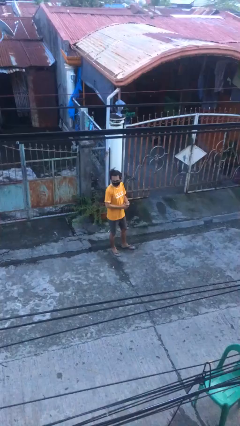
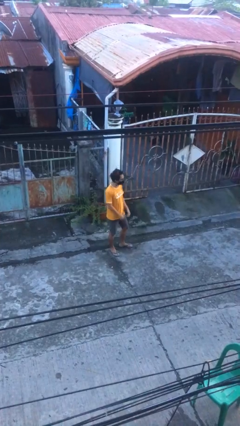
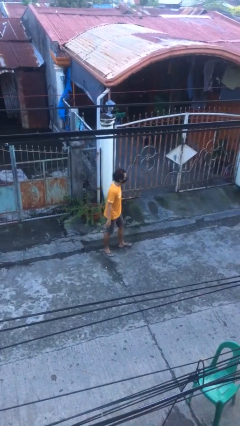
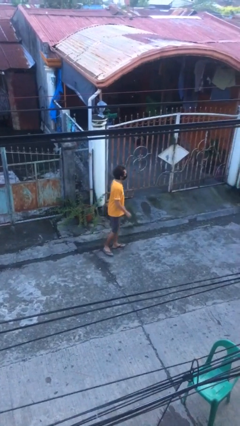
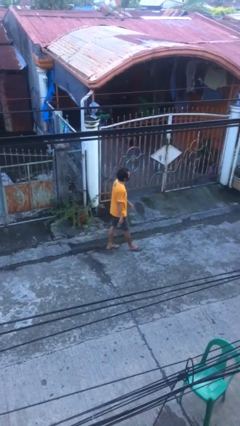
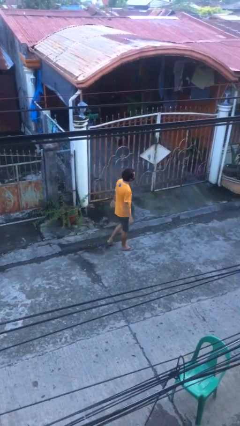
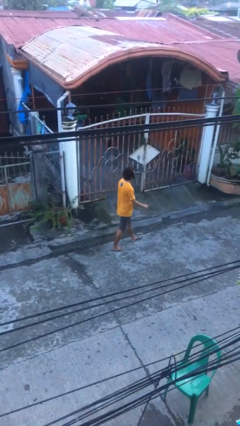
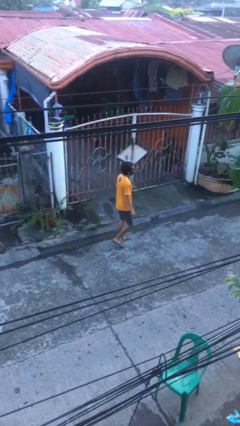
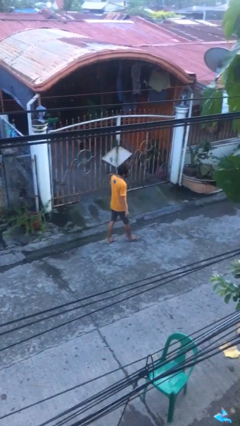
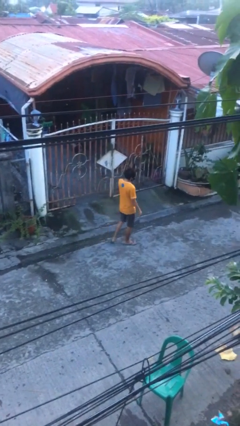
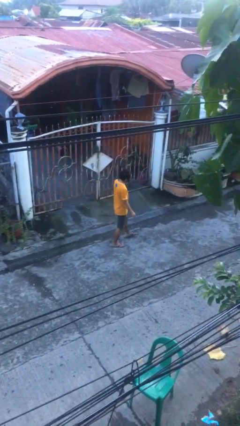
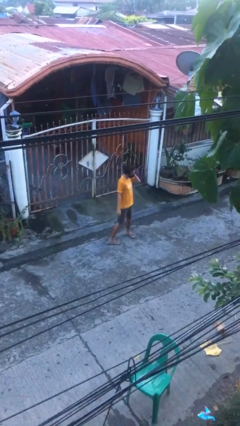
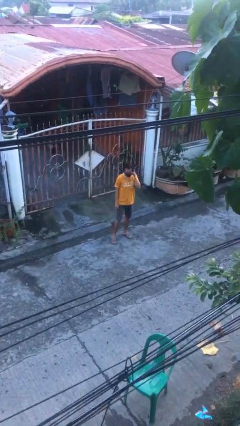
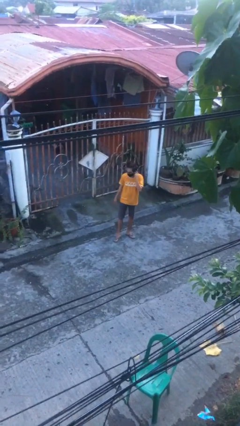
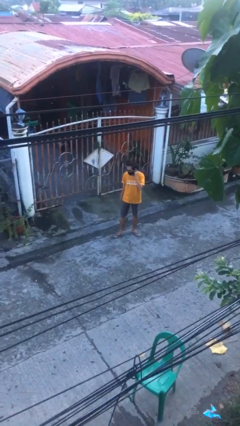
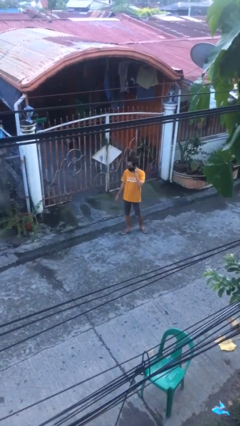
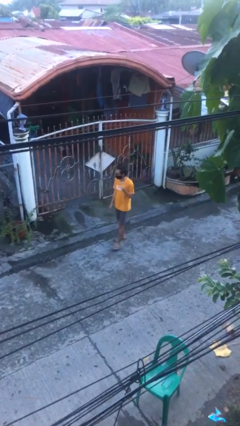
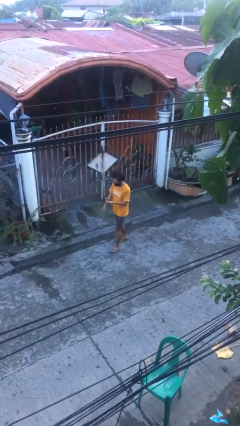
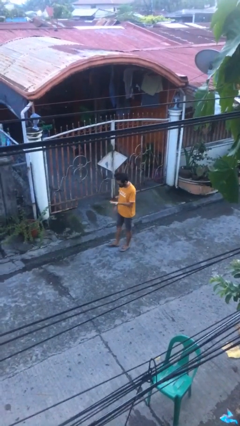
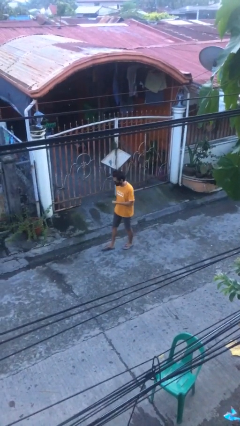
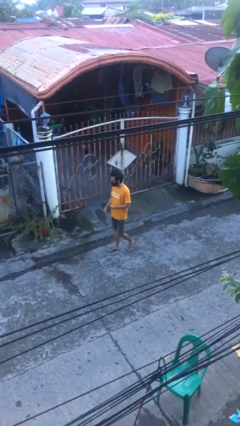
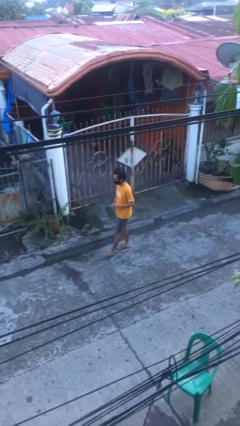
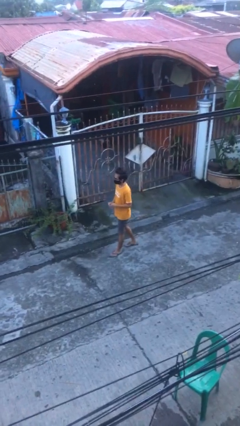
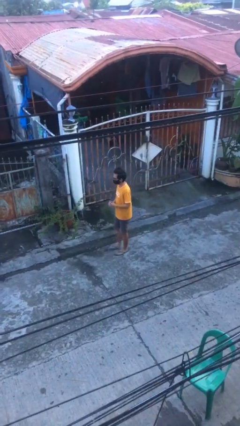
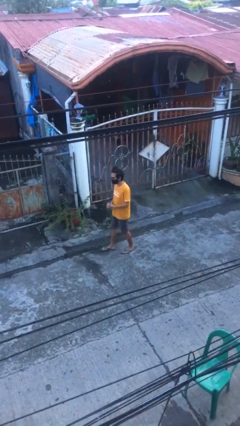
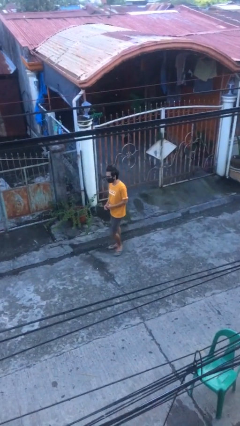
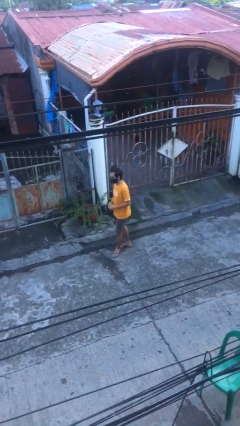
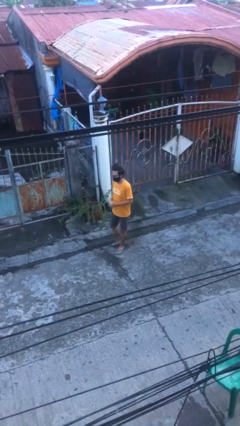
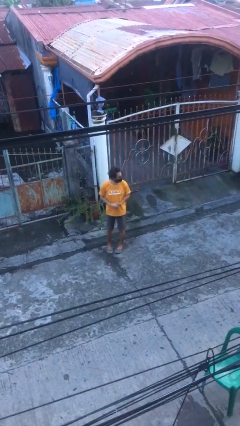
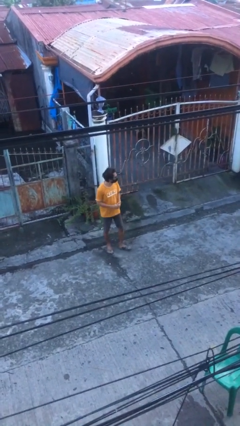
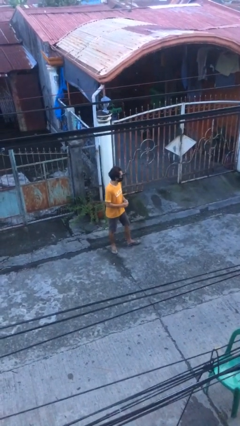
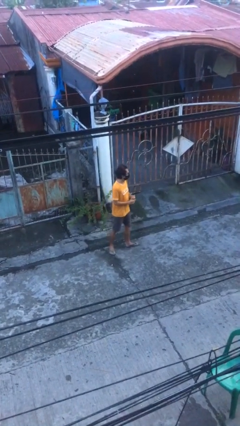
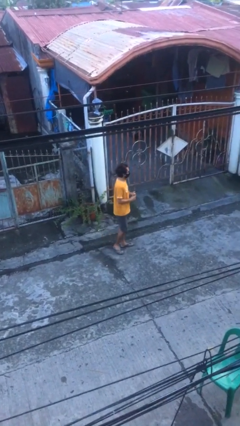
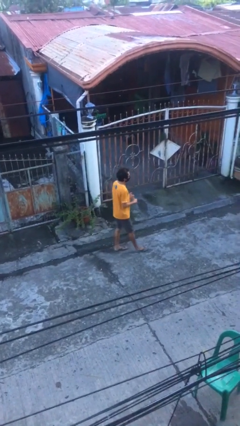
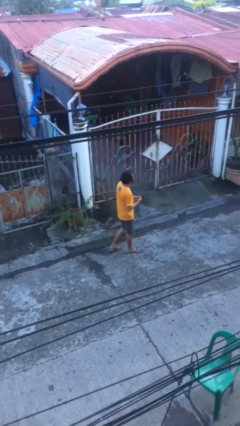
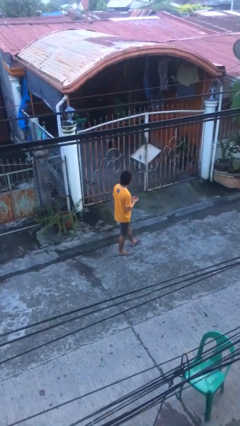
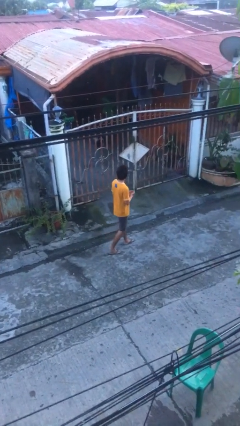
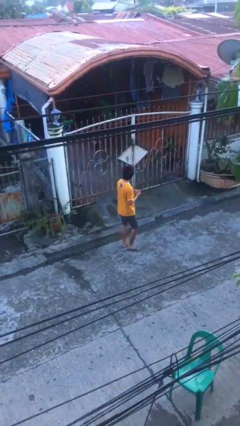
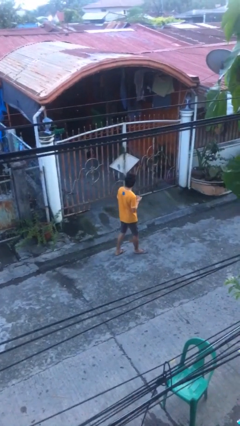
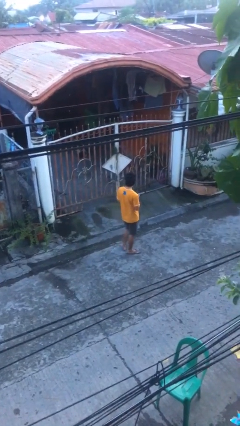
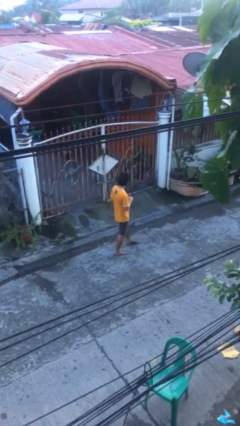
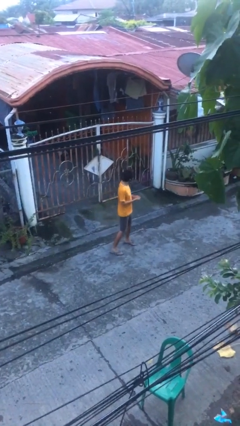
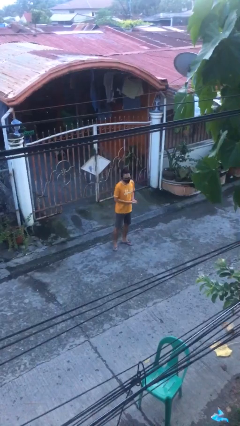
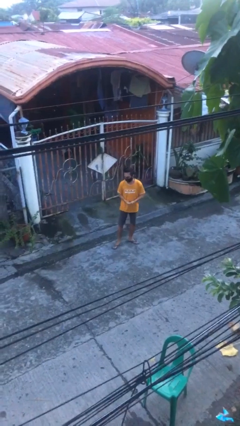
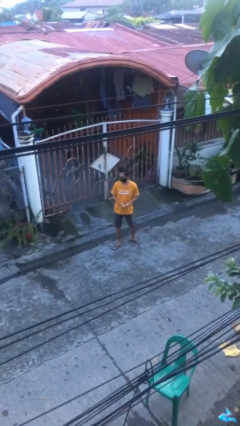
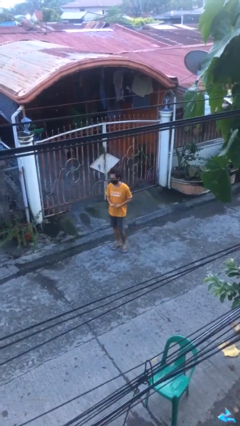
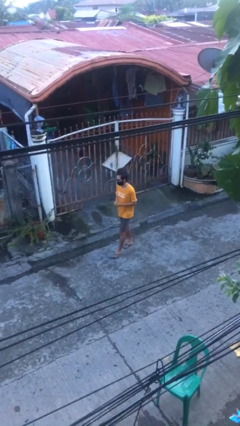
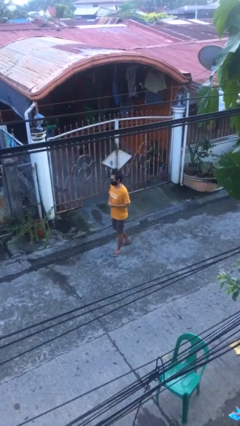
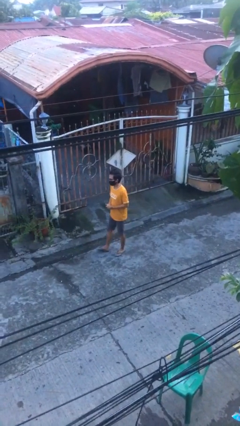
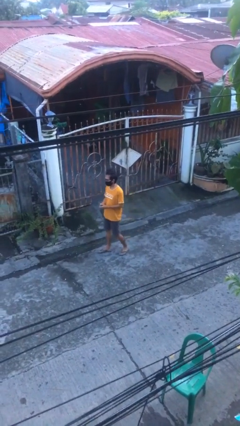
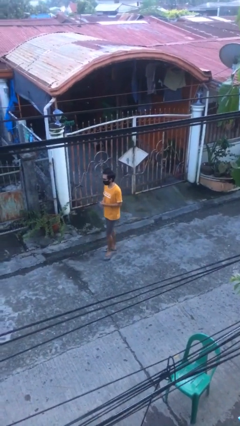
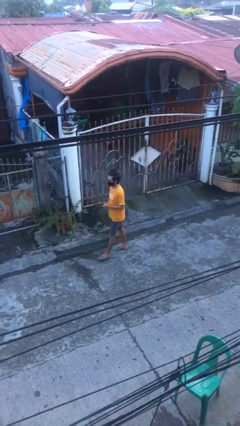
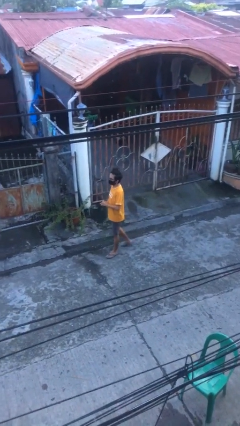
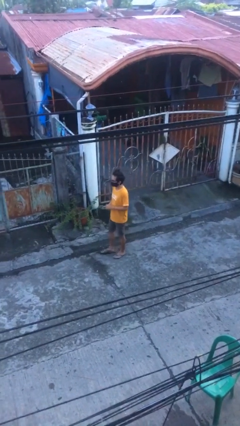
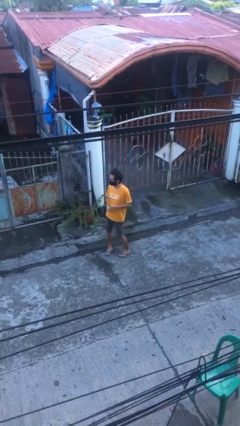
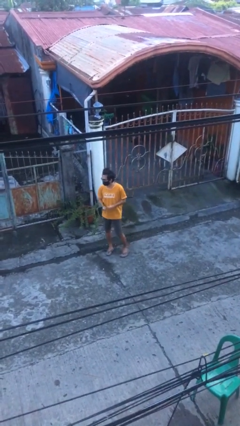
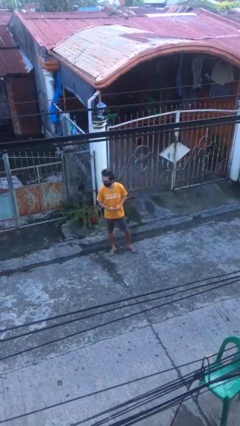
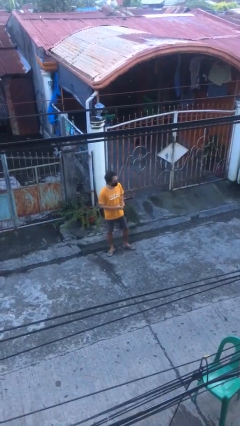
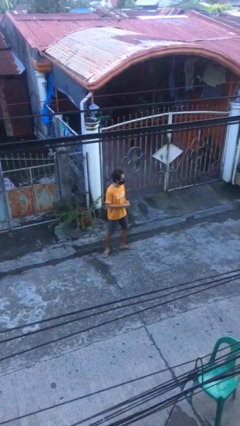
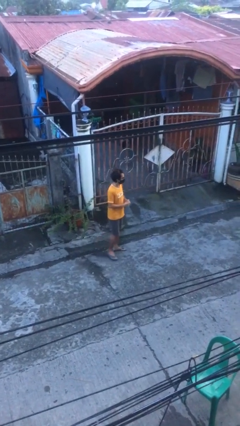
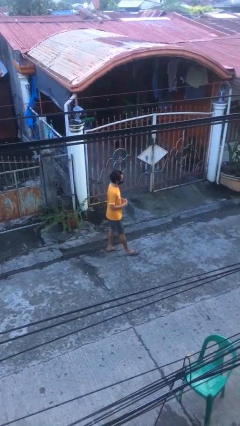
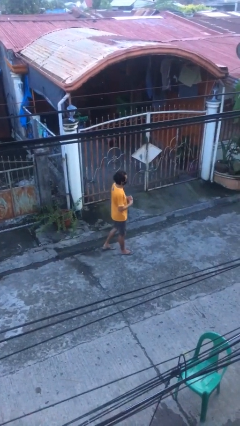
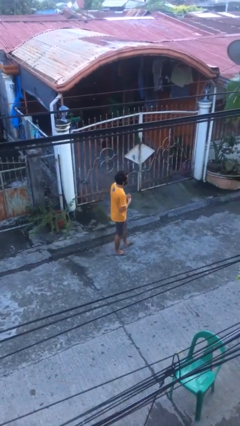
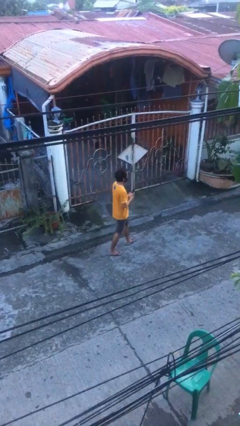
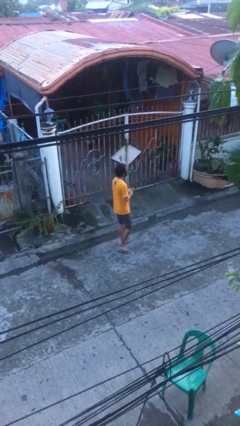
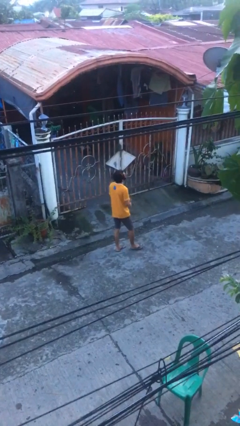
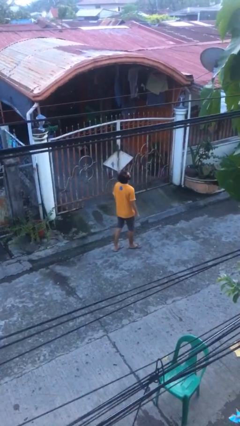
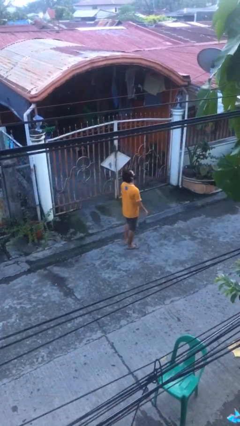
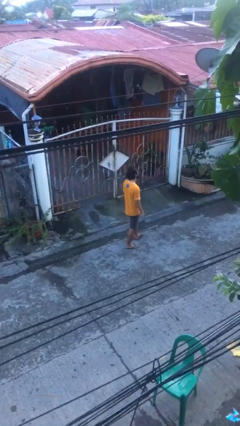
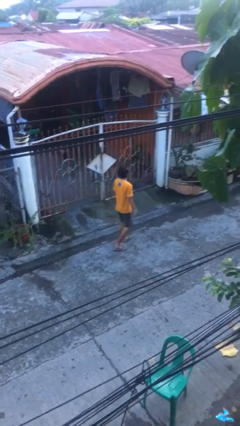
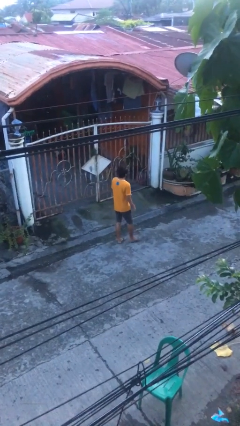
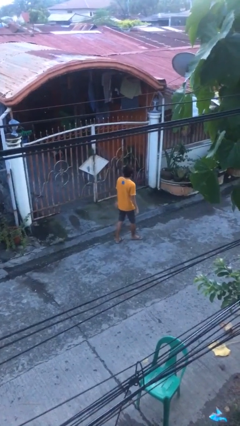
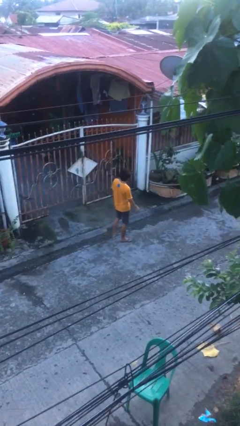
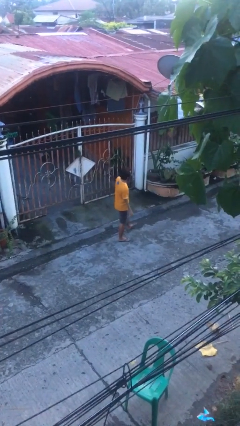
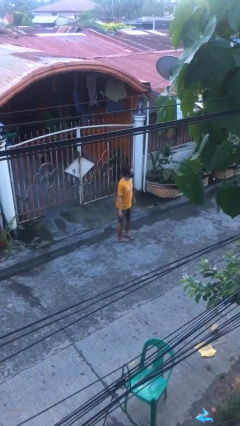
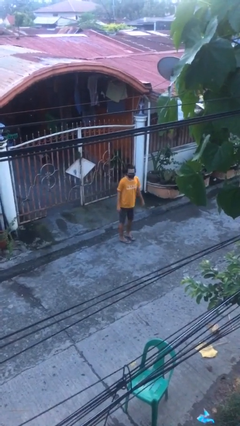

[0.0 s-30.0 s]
person walks

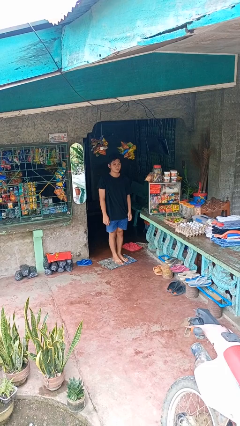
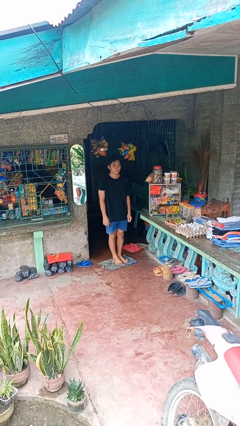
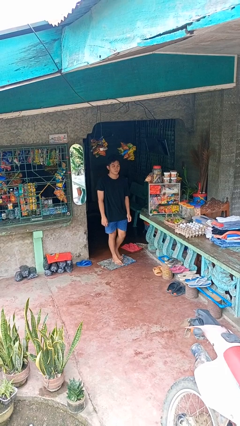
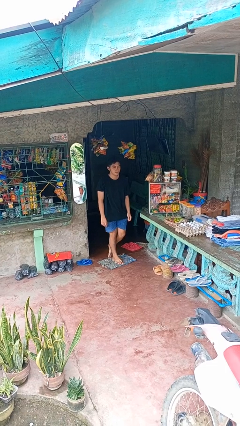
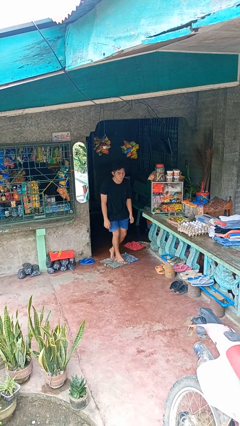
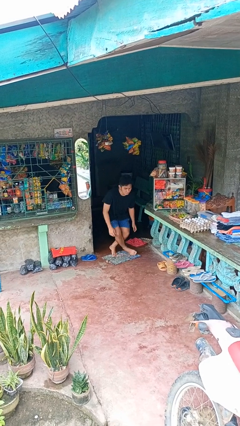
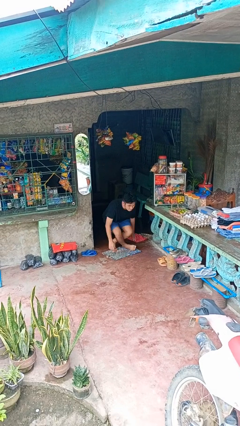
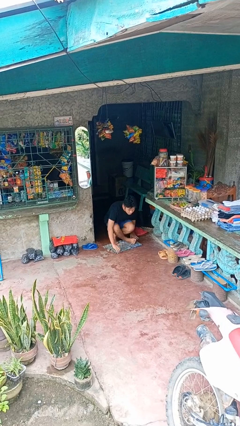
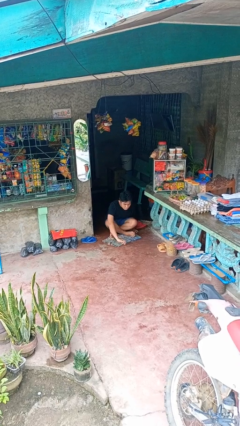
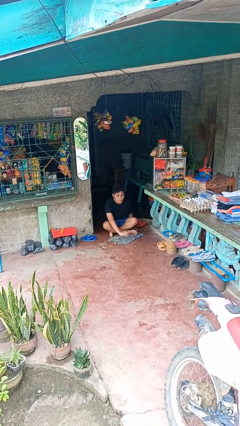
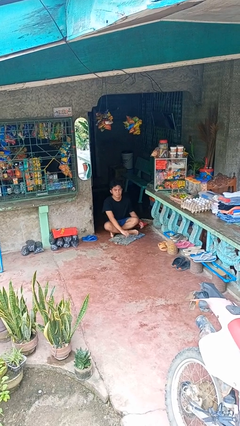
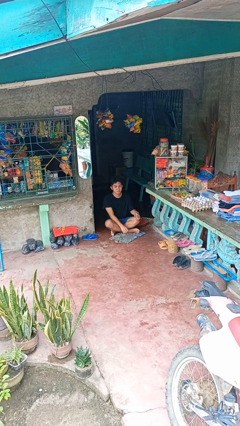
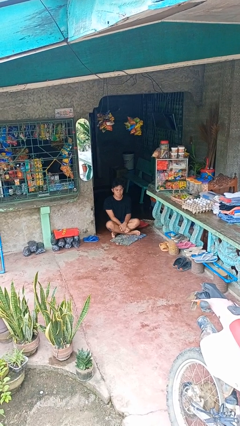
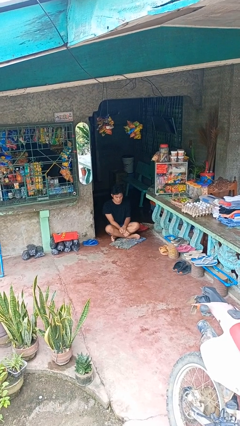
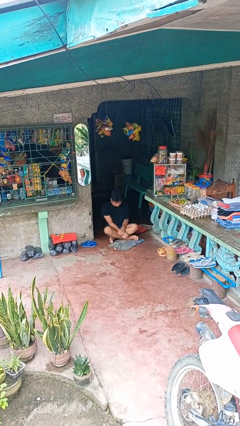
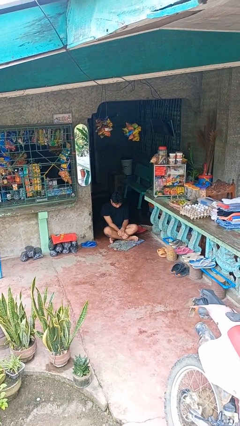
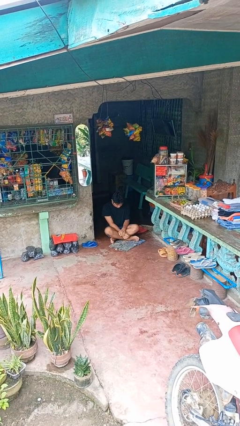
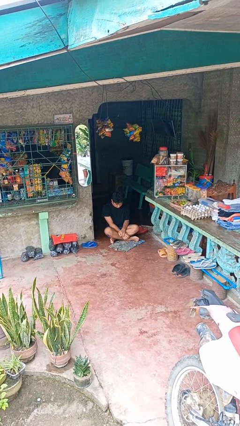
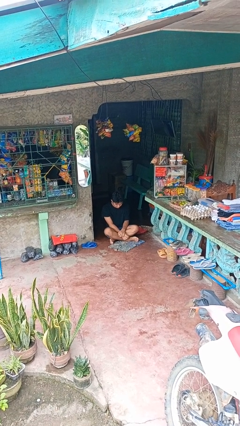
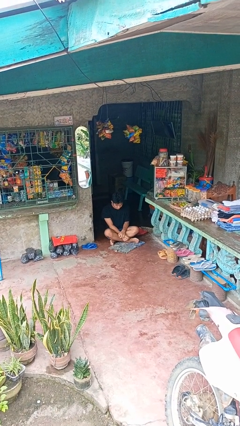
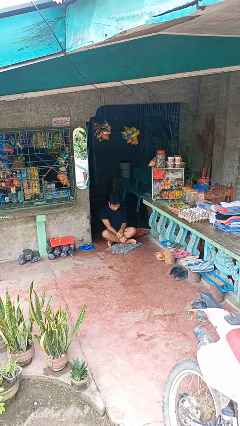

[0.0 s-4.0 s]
person sits crisscross
